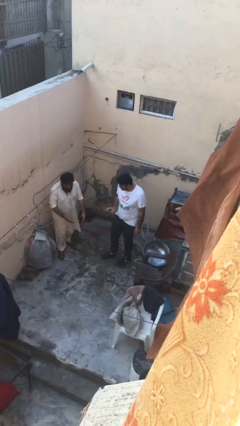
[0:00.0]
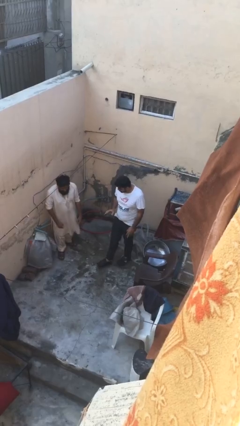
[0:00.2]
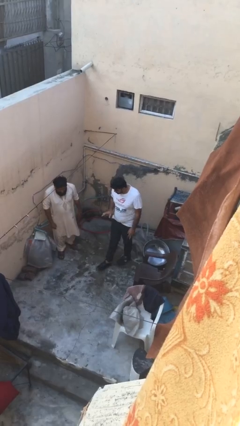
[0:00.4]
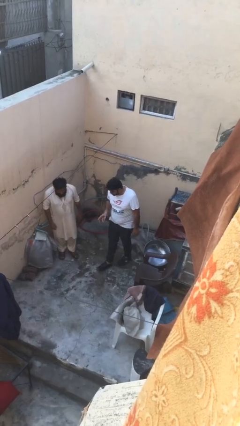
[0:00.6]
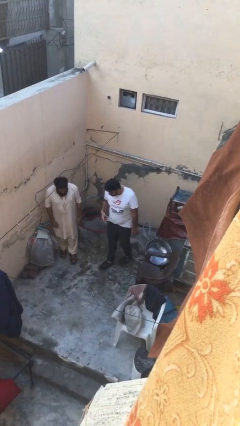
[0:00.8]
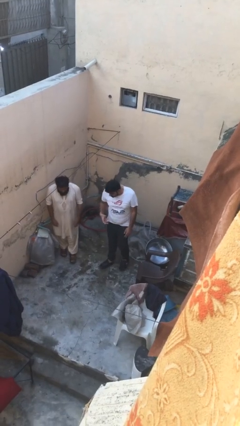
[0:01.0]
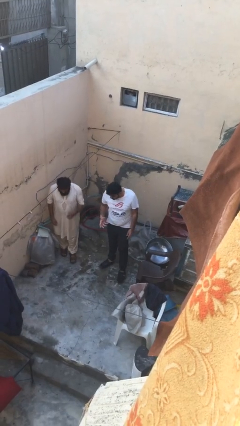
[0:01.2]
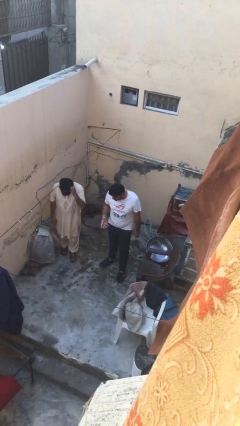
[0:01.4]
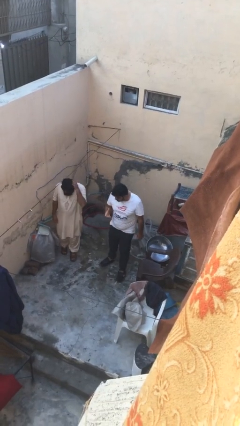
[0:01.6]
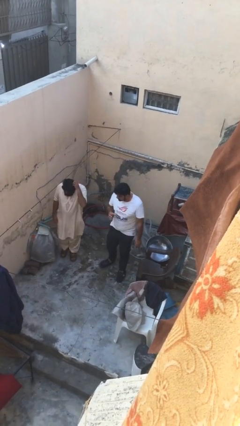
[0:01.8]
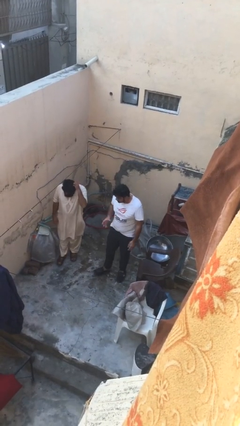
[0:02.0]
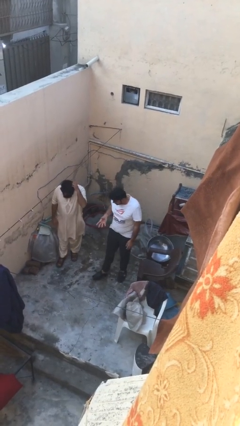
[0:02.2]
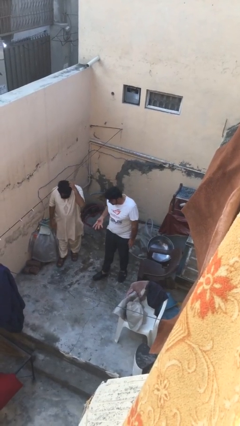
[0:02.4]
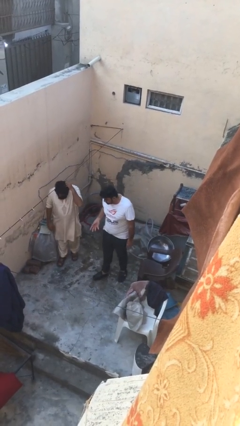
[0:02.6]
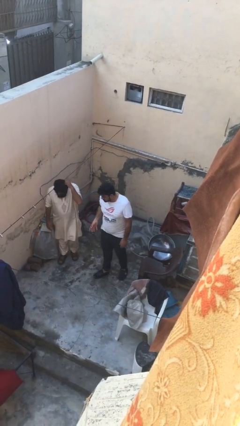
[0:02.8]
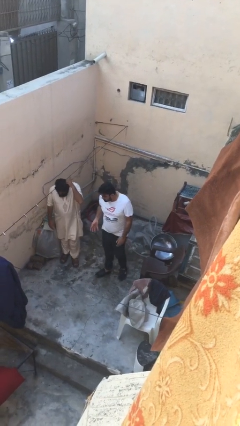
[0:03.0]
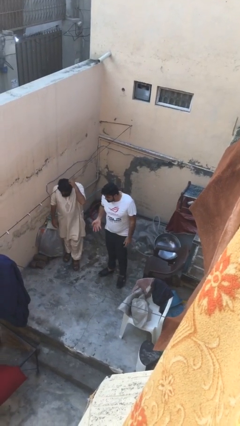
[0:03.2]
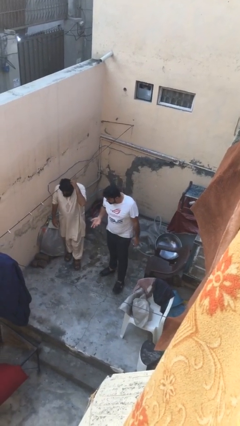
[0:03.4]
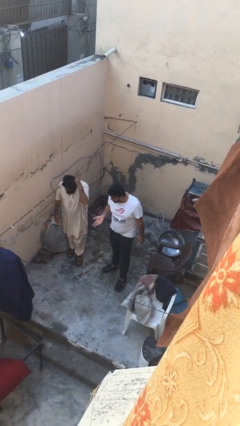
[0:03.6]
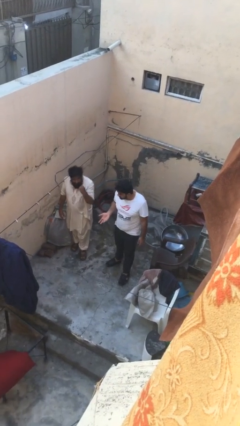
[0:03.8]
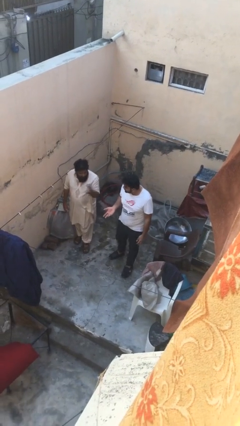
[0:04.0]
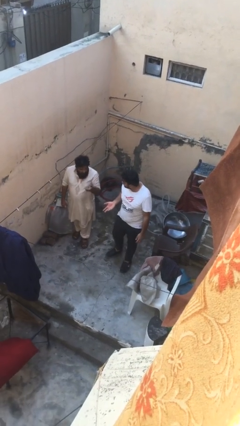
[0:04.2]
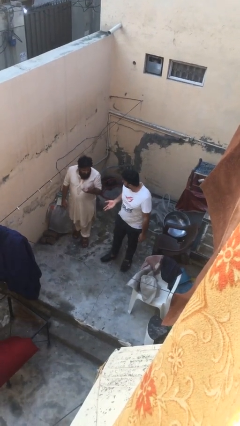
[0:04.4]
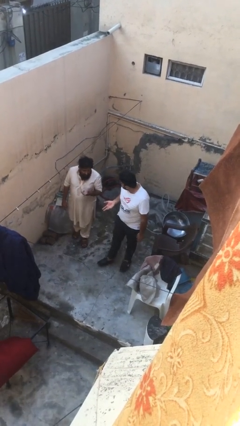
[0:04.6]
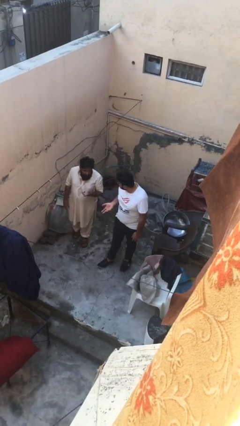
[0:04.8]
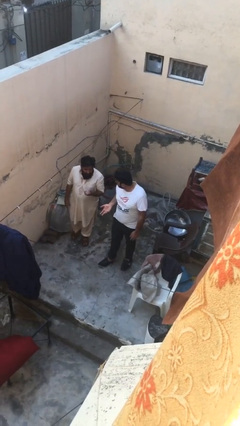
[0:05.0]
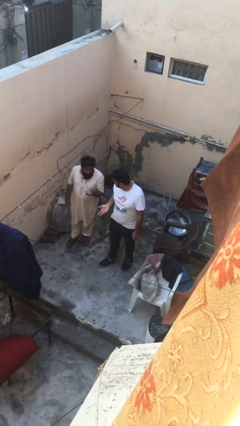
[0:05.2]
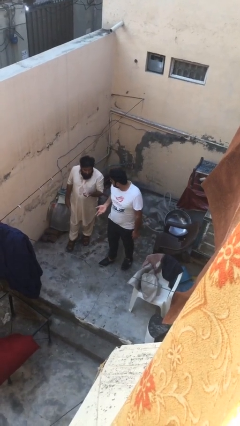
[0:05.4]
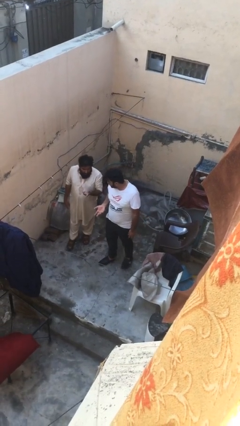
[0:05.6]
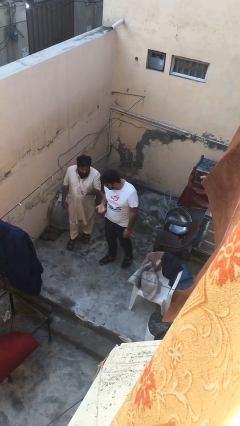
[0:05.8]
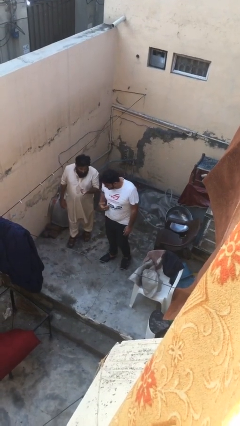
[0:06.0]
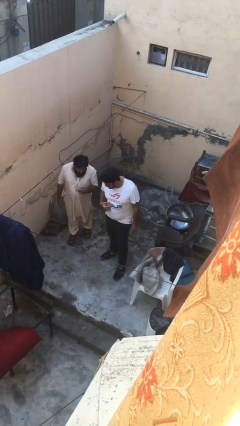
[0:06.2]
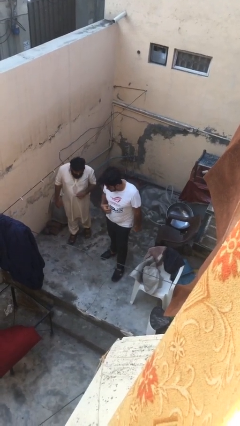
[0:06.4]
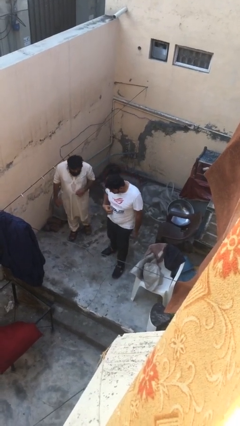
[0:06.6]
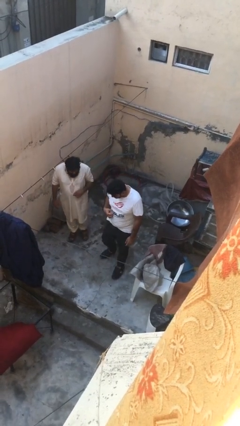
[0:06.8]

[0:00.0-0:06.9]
person talks to person

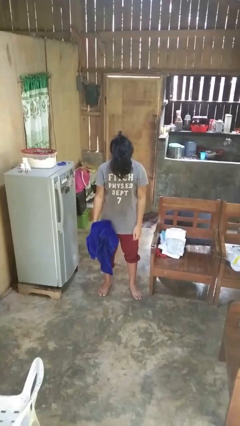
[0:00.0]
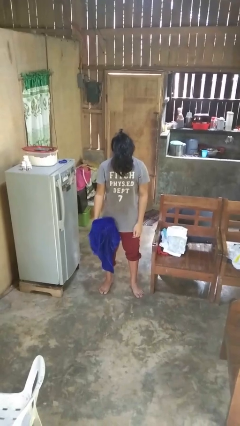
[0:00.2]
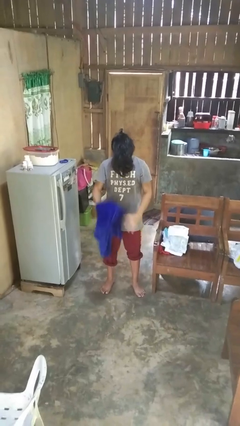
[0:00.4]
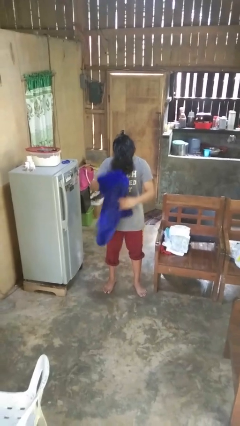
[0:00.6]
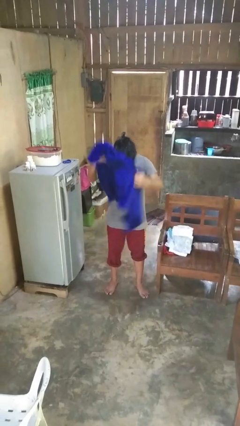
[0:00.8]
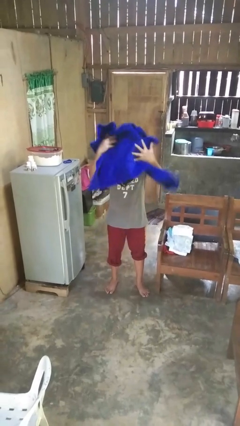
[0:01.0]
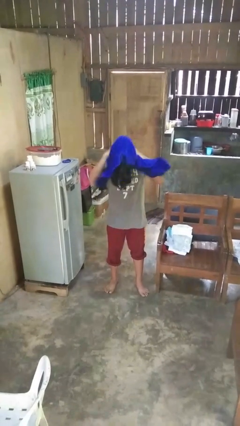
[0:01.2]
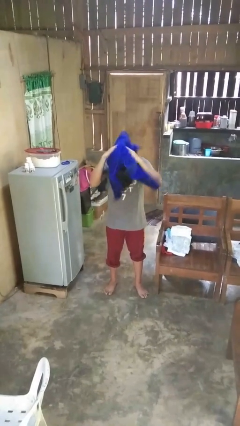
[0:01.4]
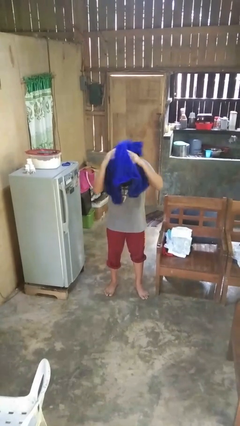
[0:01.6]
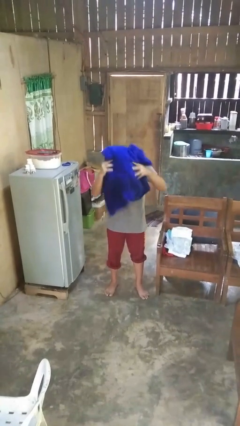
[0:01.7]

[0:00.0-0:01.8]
person dries hair with towel

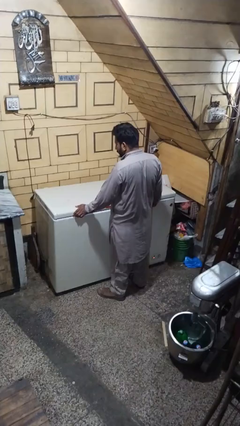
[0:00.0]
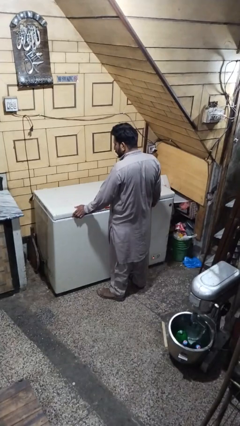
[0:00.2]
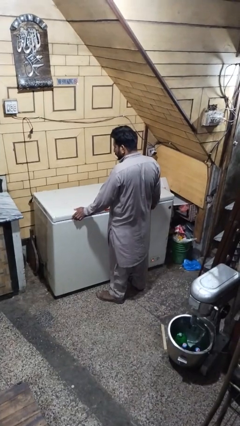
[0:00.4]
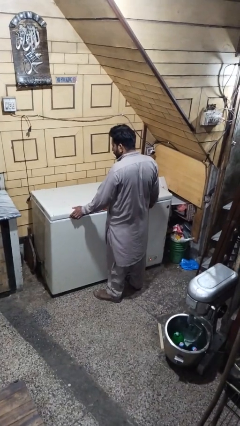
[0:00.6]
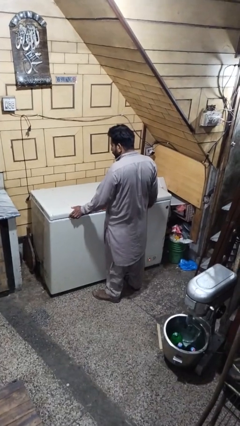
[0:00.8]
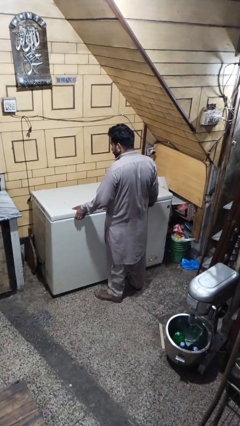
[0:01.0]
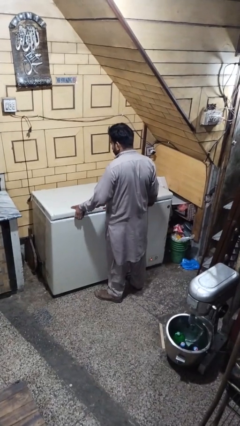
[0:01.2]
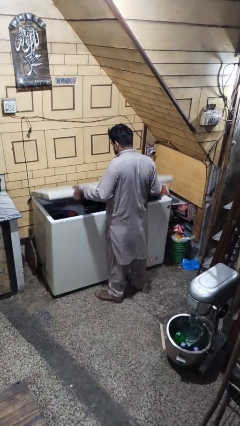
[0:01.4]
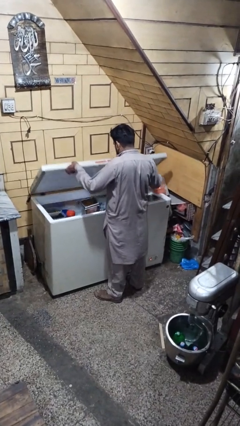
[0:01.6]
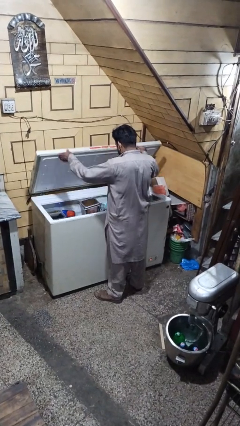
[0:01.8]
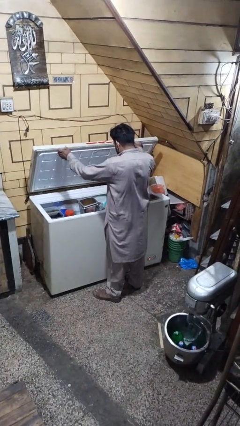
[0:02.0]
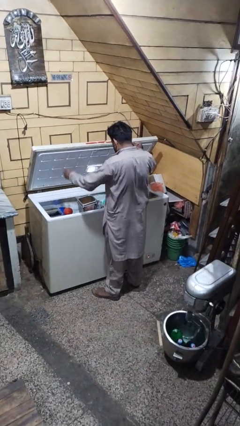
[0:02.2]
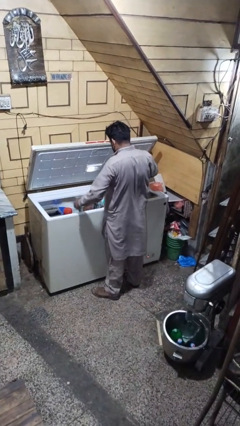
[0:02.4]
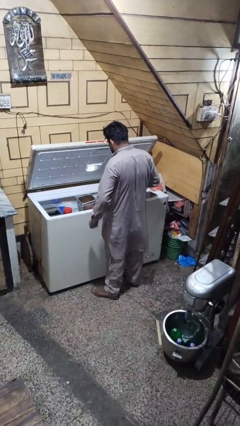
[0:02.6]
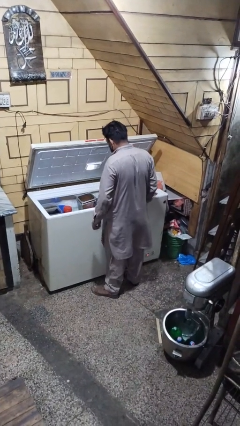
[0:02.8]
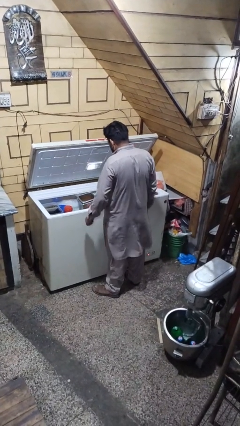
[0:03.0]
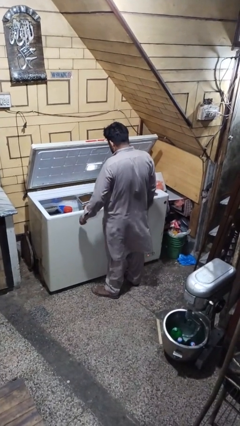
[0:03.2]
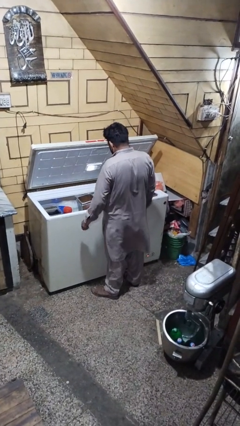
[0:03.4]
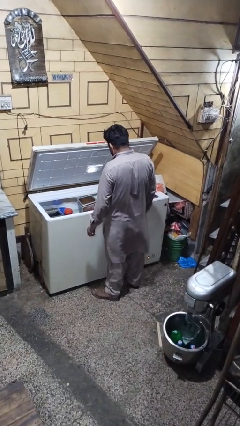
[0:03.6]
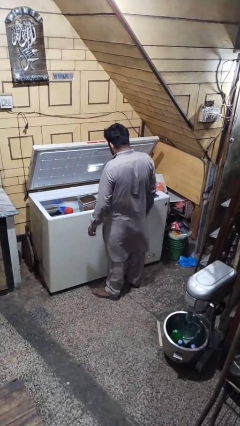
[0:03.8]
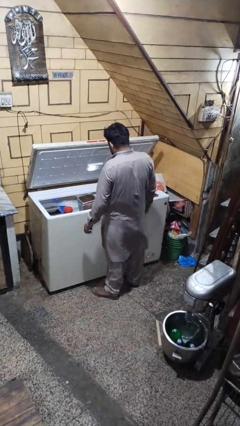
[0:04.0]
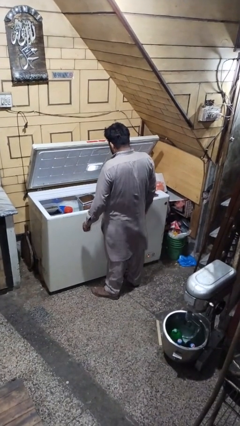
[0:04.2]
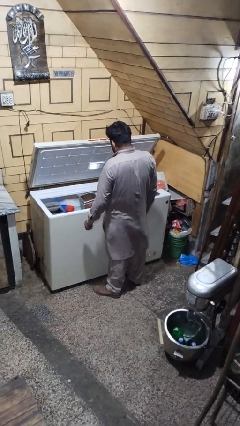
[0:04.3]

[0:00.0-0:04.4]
person opens refrigerator

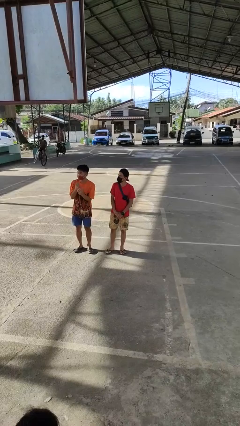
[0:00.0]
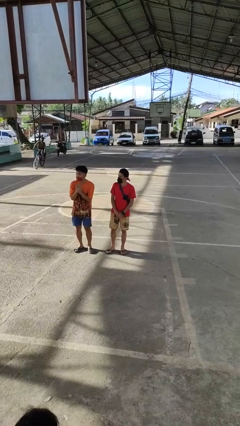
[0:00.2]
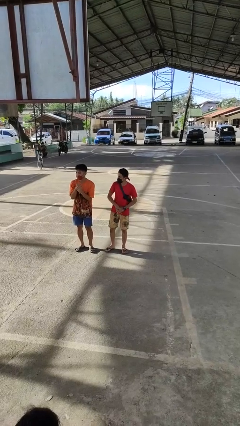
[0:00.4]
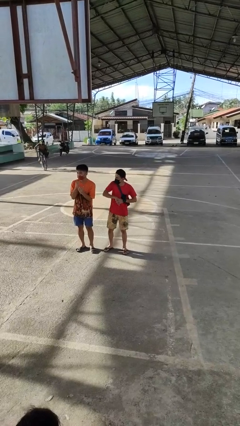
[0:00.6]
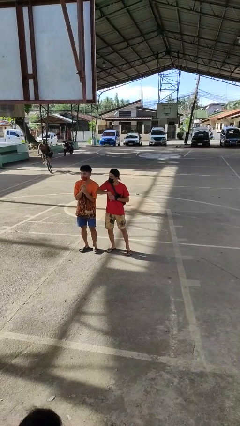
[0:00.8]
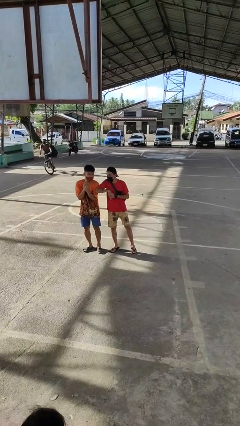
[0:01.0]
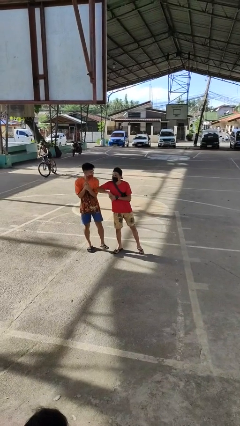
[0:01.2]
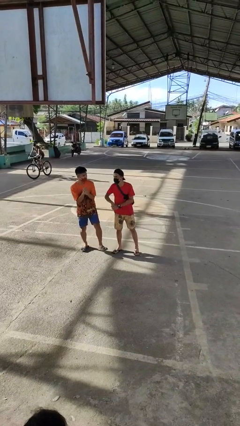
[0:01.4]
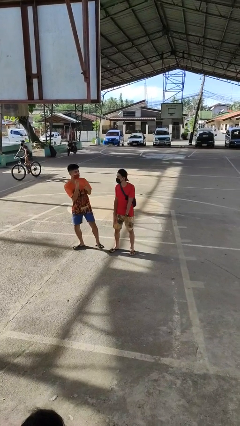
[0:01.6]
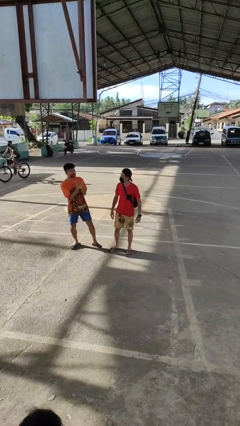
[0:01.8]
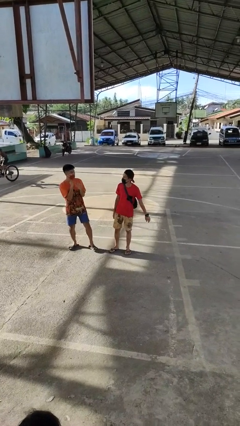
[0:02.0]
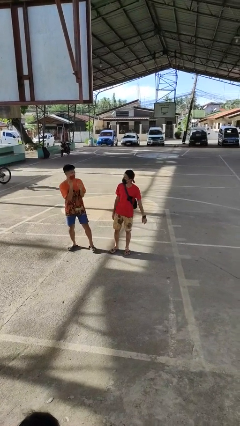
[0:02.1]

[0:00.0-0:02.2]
person nudges person with elbow

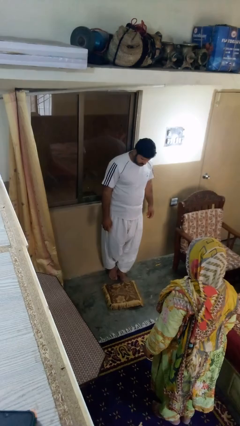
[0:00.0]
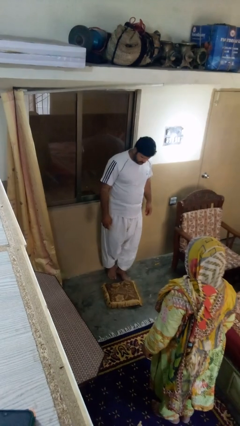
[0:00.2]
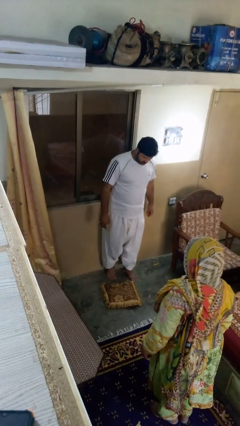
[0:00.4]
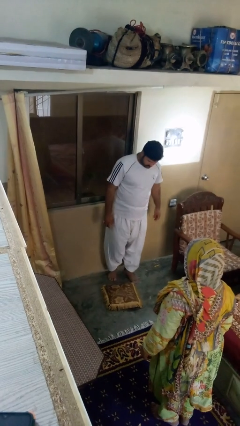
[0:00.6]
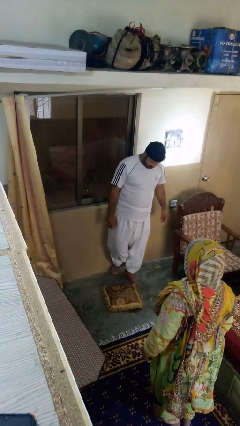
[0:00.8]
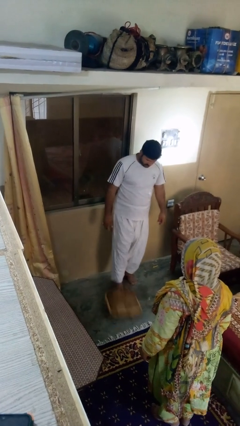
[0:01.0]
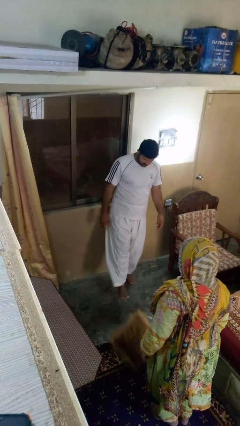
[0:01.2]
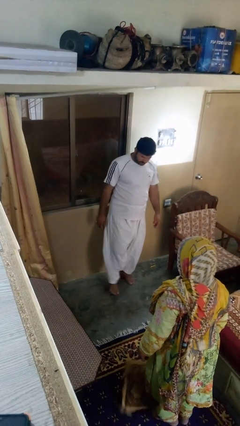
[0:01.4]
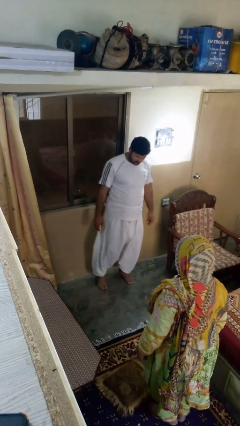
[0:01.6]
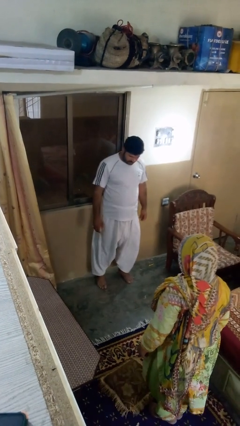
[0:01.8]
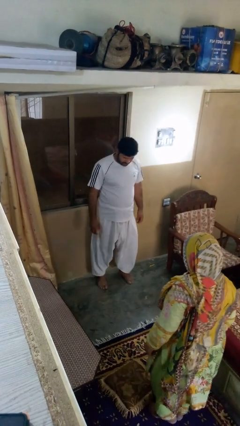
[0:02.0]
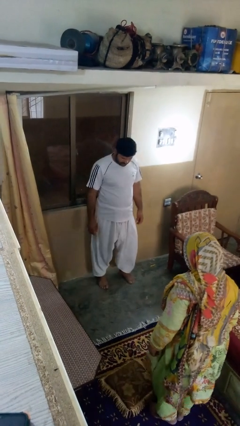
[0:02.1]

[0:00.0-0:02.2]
person kicks object to person

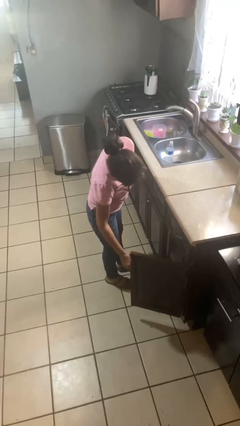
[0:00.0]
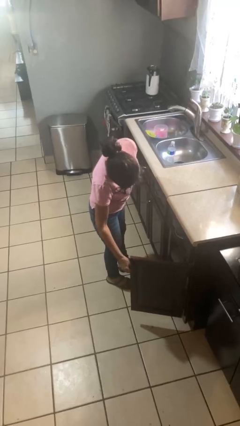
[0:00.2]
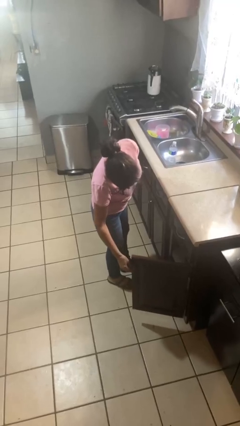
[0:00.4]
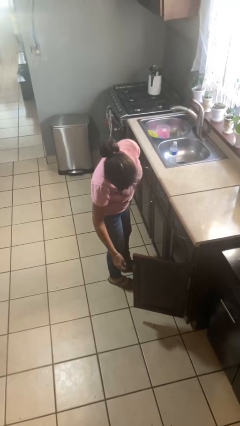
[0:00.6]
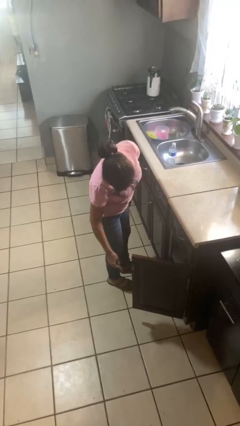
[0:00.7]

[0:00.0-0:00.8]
person opens cabinet
